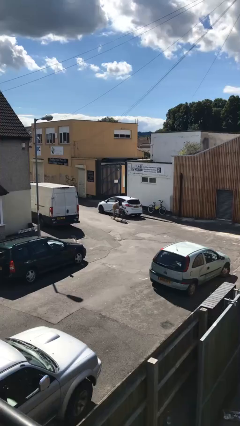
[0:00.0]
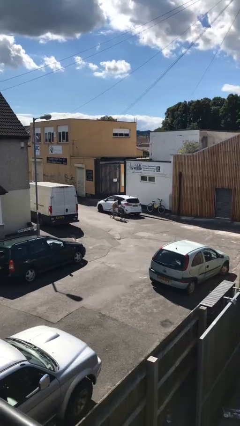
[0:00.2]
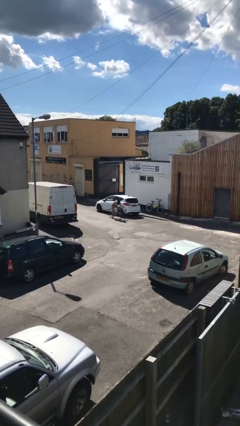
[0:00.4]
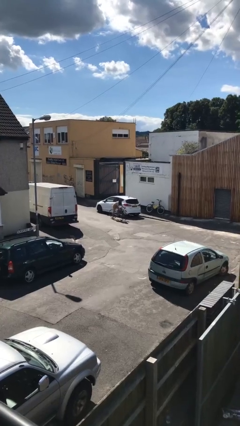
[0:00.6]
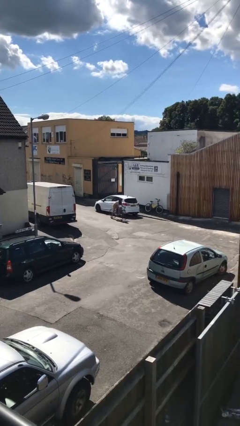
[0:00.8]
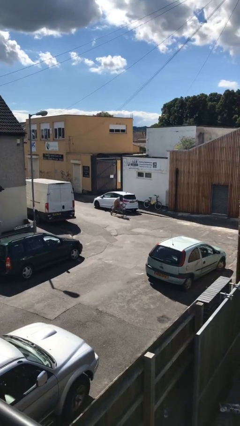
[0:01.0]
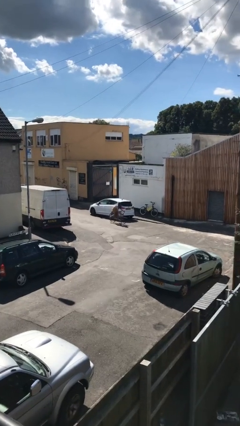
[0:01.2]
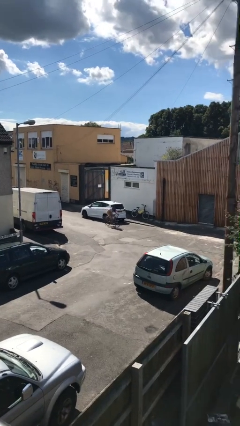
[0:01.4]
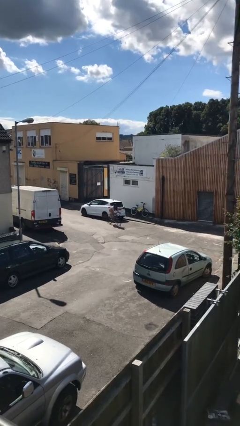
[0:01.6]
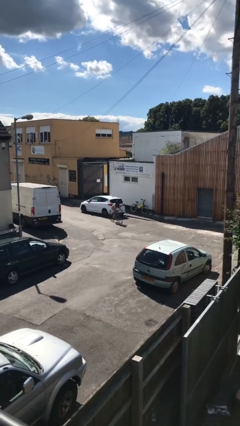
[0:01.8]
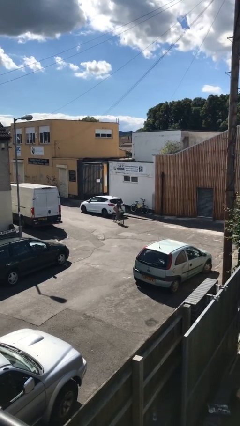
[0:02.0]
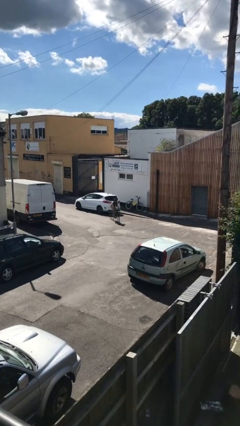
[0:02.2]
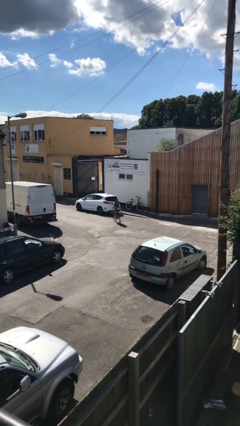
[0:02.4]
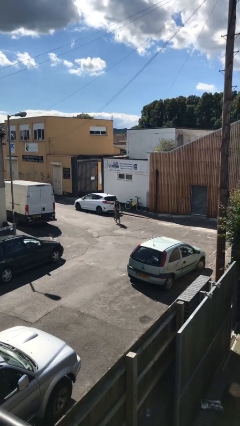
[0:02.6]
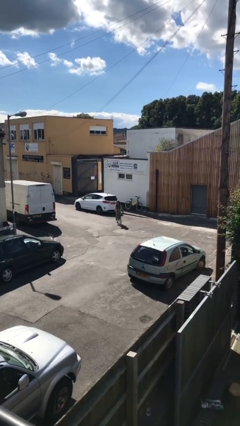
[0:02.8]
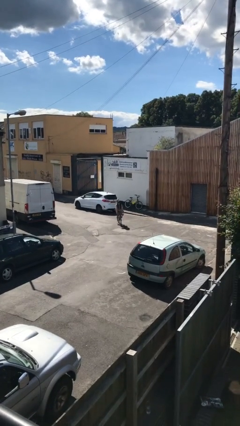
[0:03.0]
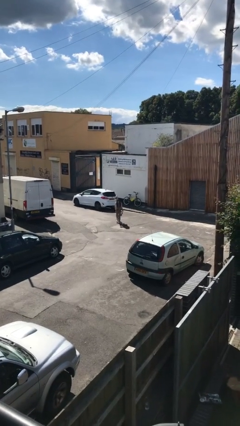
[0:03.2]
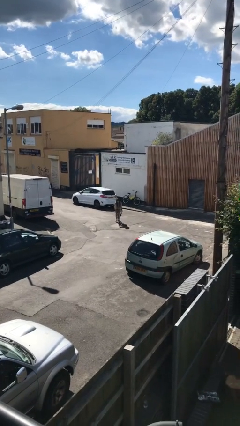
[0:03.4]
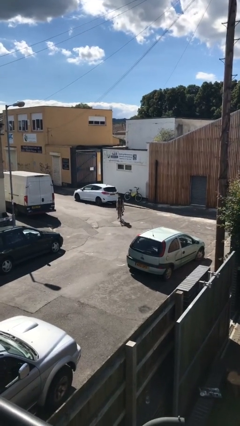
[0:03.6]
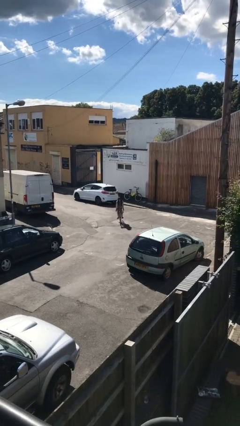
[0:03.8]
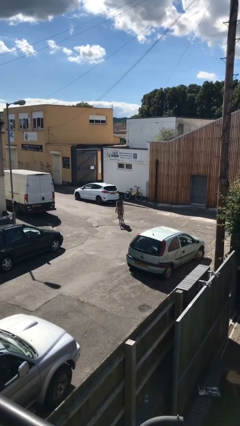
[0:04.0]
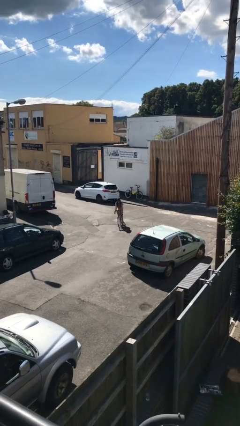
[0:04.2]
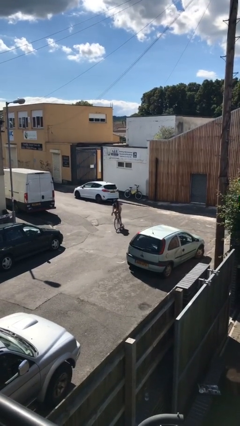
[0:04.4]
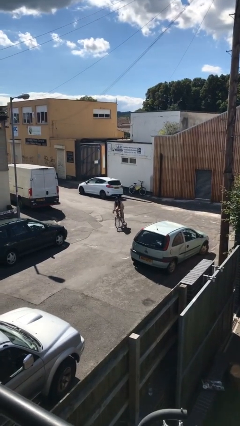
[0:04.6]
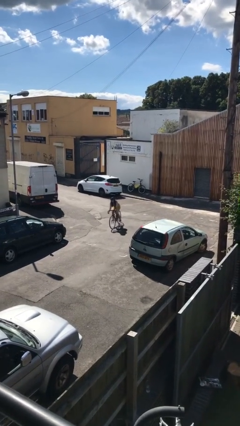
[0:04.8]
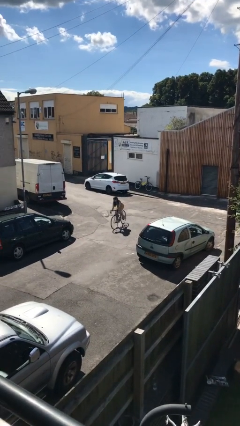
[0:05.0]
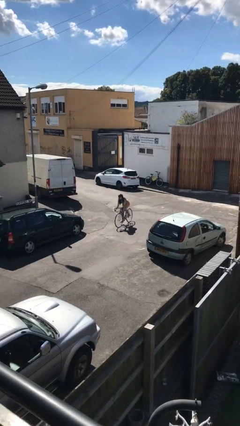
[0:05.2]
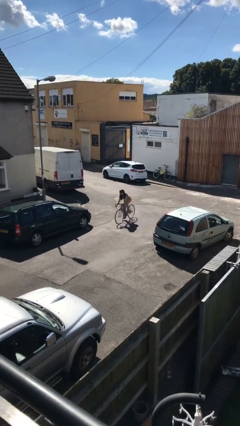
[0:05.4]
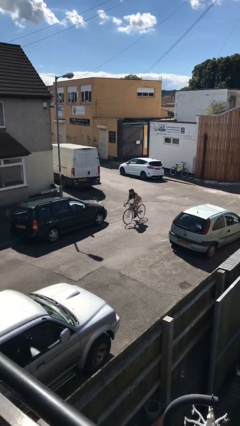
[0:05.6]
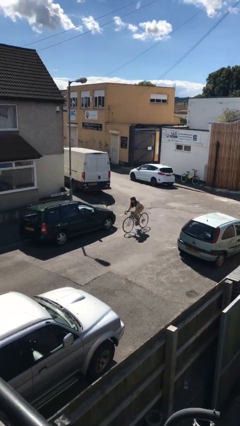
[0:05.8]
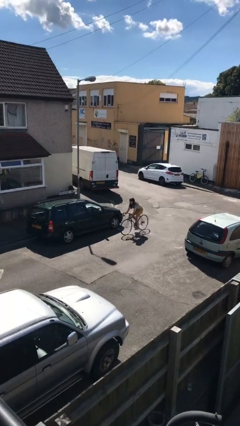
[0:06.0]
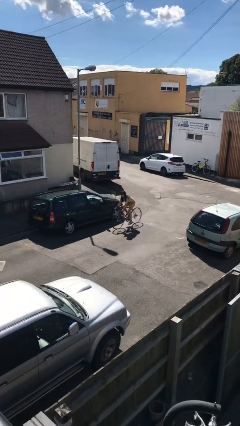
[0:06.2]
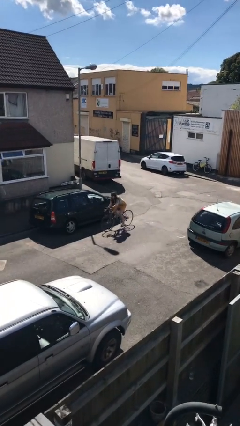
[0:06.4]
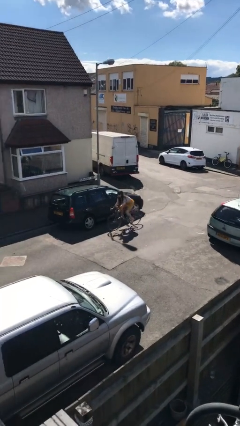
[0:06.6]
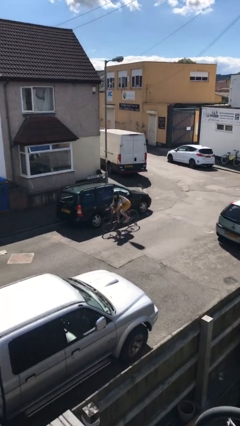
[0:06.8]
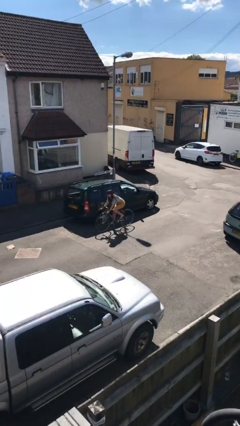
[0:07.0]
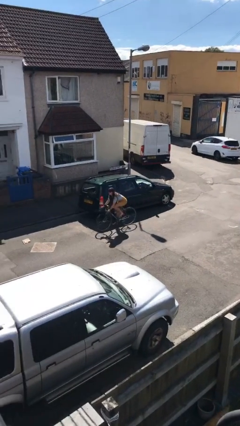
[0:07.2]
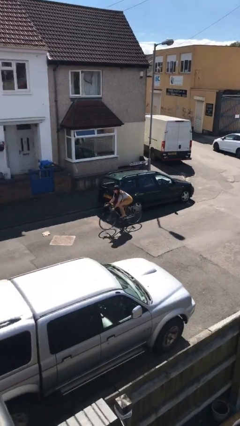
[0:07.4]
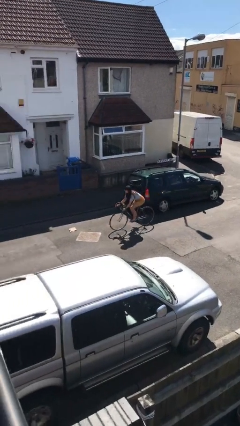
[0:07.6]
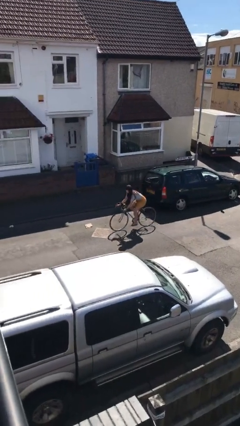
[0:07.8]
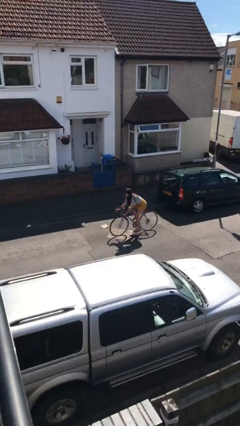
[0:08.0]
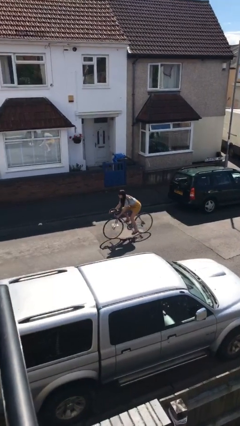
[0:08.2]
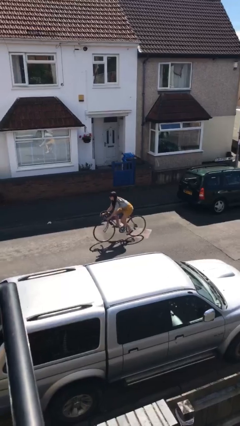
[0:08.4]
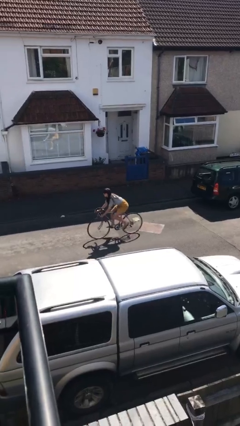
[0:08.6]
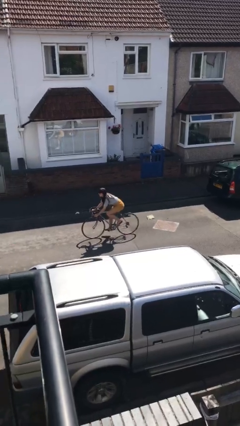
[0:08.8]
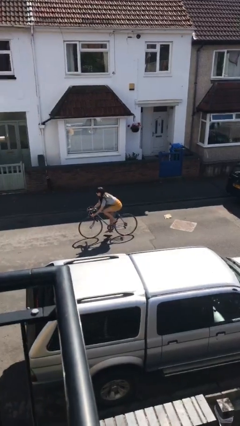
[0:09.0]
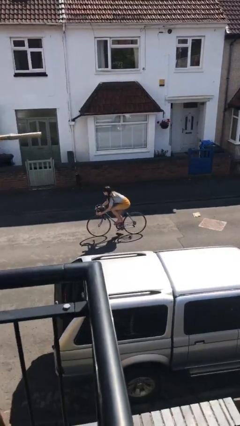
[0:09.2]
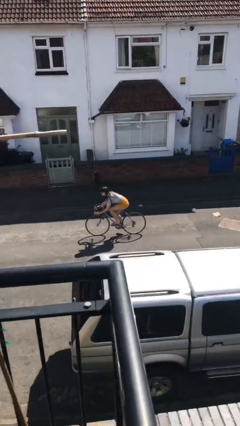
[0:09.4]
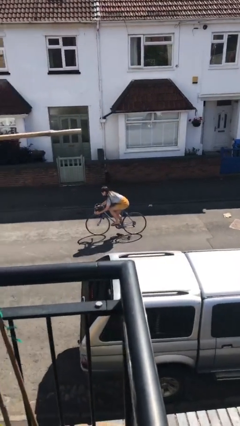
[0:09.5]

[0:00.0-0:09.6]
person rides bicycle

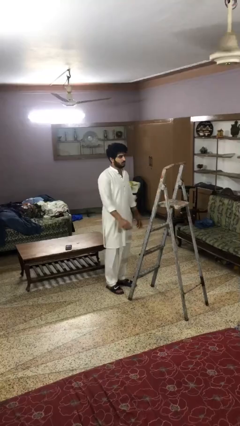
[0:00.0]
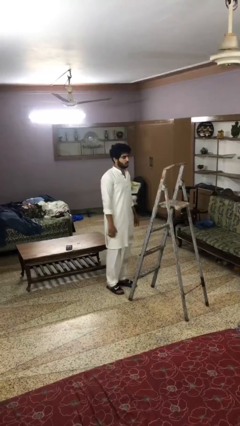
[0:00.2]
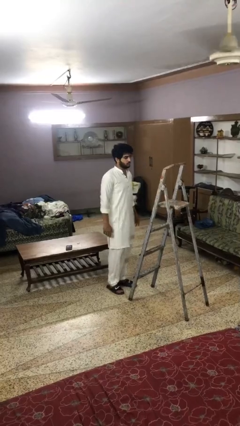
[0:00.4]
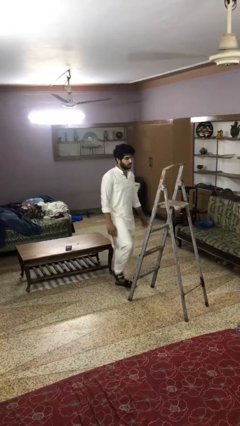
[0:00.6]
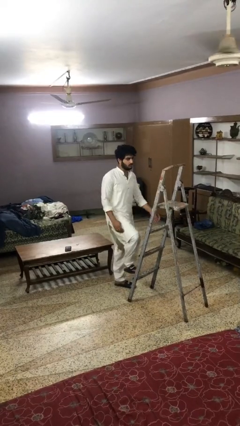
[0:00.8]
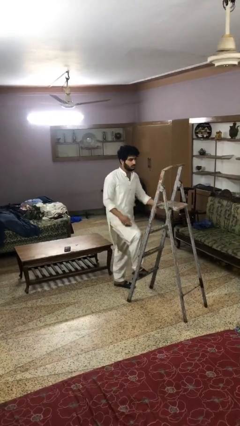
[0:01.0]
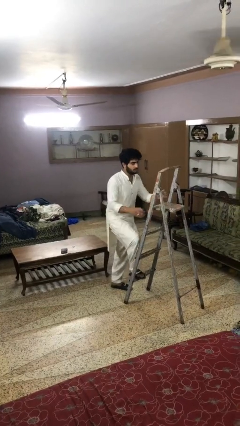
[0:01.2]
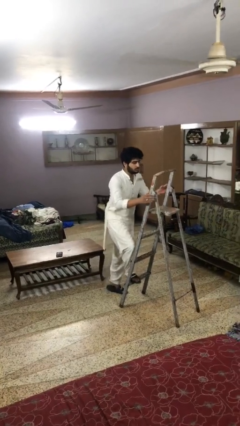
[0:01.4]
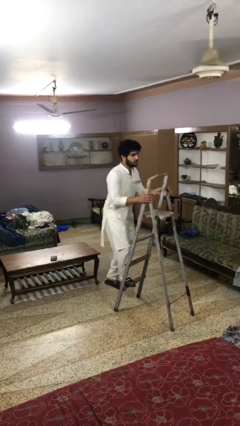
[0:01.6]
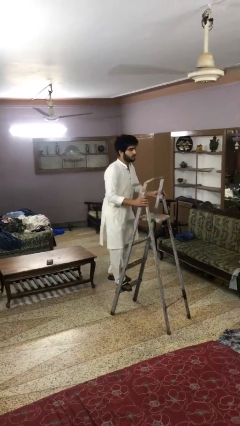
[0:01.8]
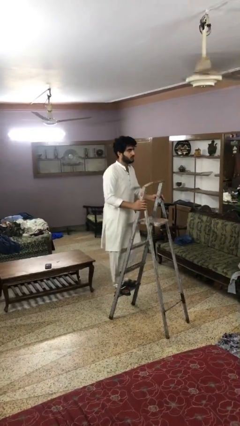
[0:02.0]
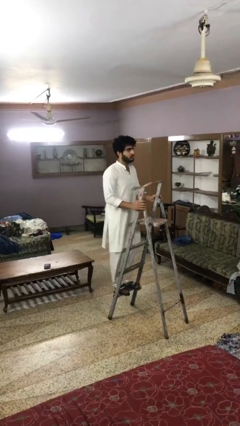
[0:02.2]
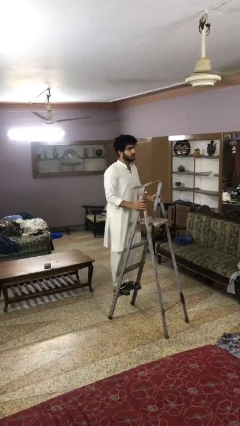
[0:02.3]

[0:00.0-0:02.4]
person climbs up ladder

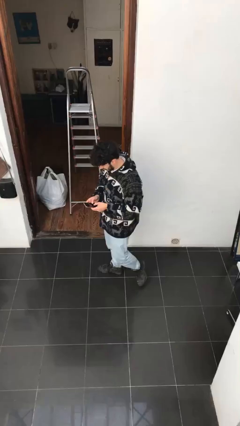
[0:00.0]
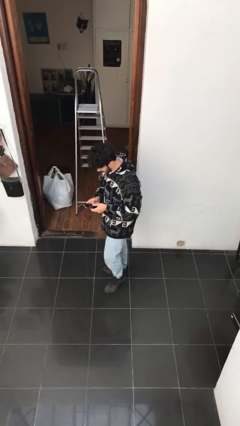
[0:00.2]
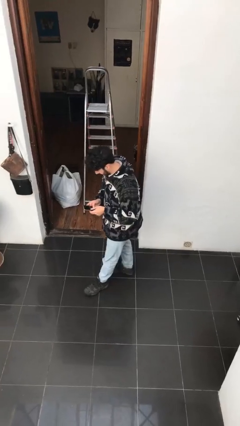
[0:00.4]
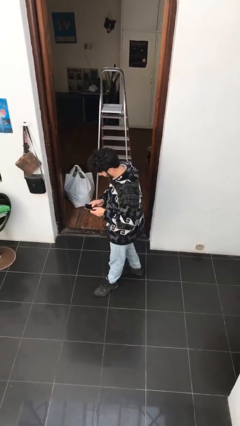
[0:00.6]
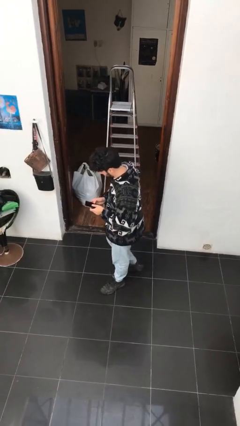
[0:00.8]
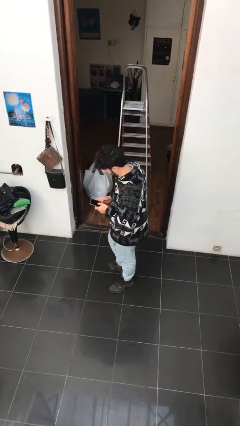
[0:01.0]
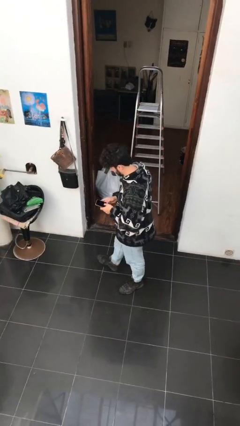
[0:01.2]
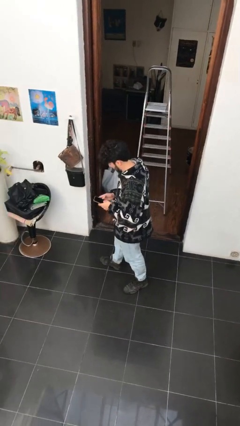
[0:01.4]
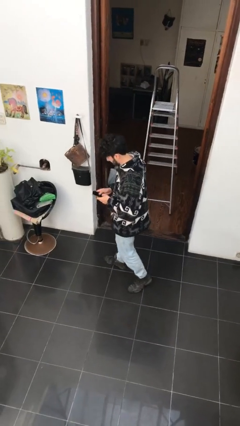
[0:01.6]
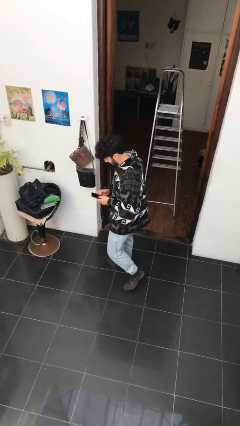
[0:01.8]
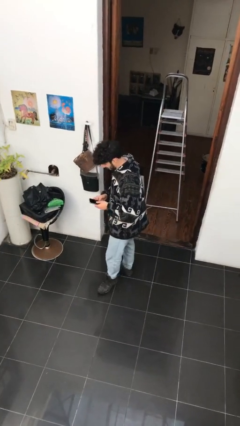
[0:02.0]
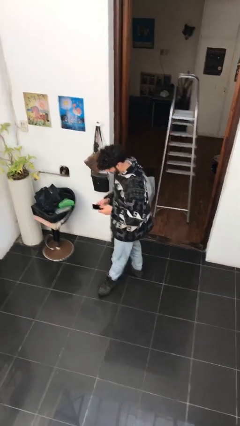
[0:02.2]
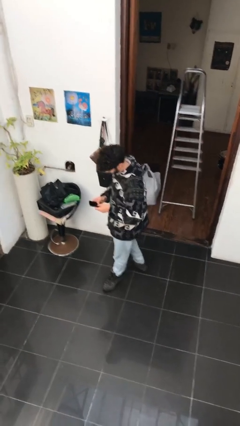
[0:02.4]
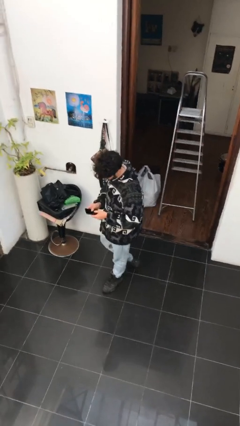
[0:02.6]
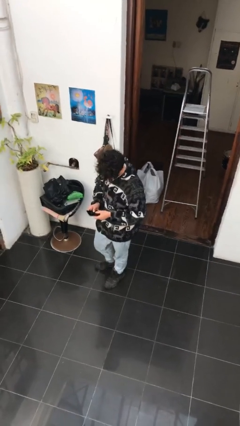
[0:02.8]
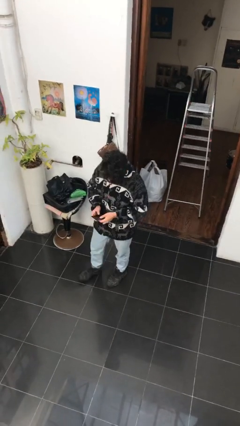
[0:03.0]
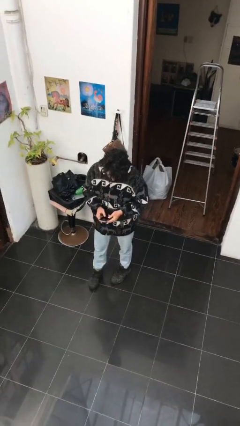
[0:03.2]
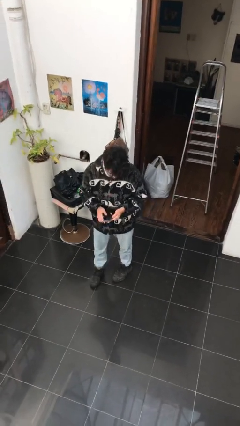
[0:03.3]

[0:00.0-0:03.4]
person texts on phone

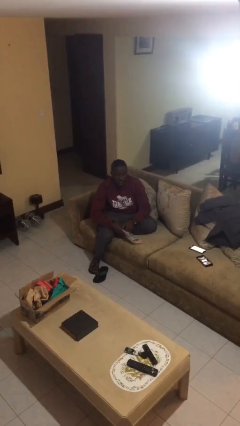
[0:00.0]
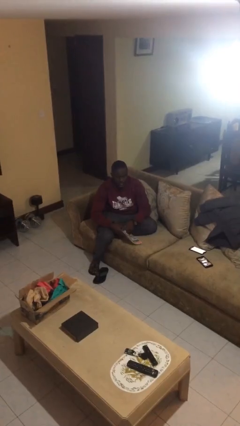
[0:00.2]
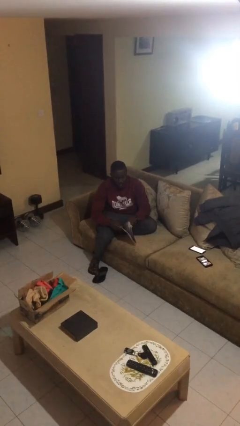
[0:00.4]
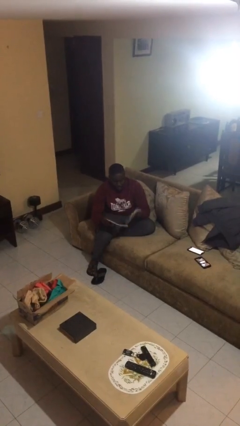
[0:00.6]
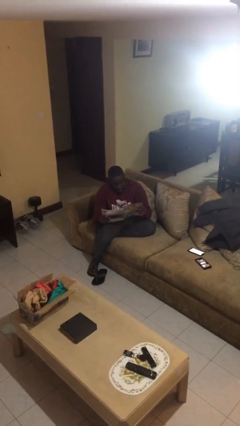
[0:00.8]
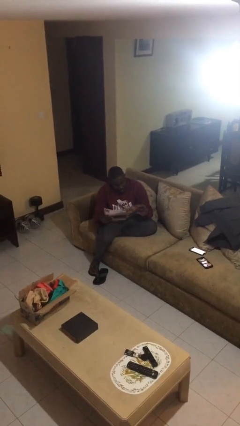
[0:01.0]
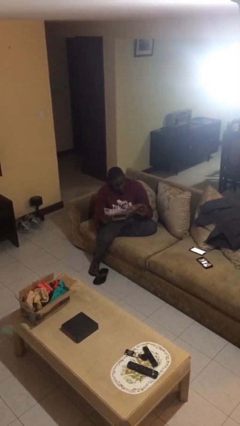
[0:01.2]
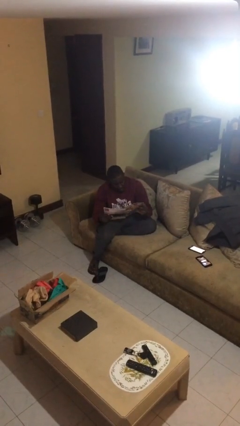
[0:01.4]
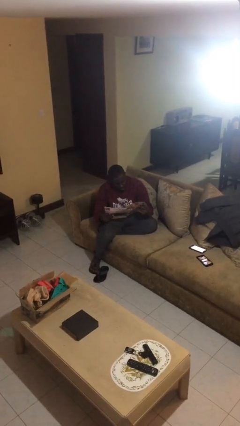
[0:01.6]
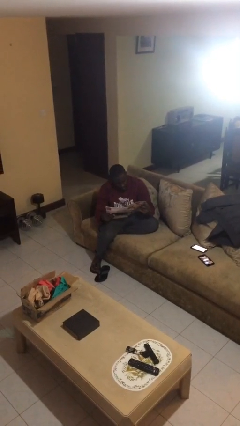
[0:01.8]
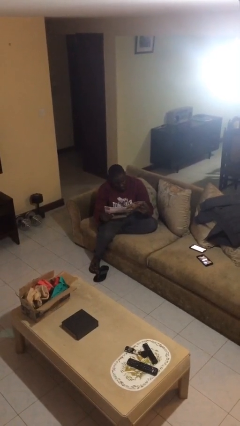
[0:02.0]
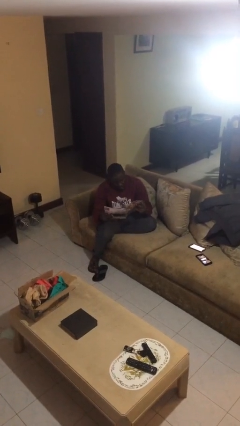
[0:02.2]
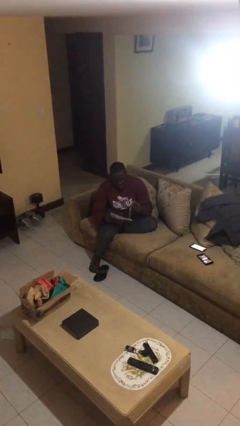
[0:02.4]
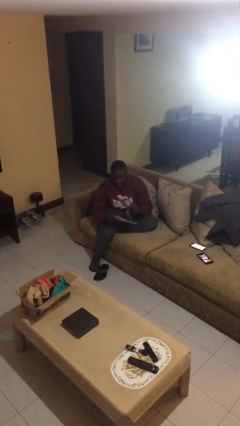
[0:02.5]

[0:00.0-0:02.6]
person reads magazine
